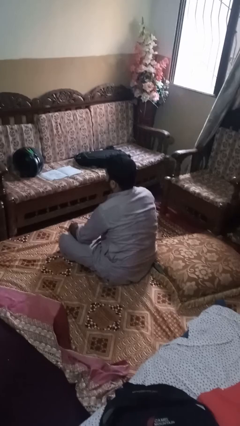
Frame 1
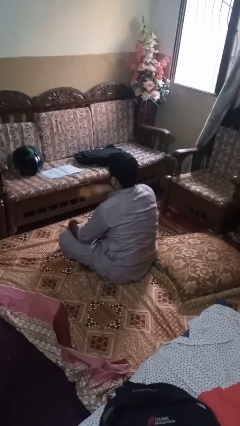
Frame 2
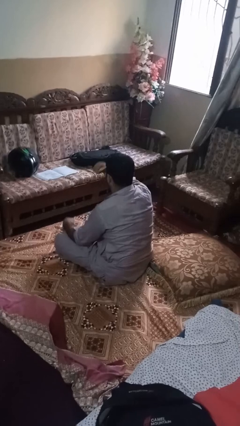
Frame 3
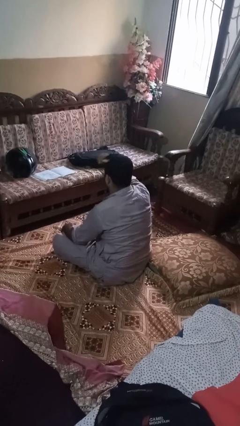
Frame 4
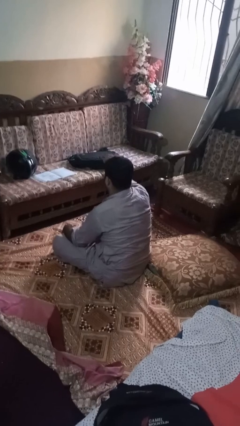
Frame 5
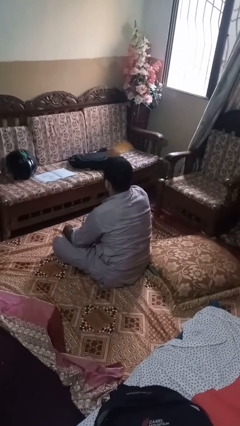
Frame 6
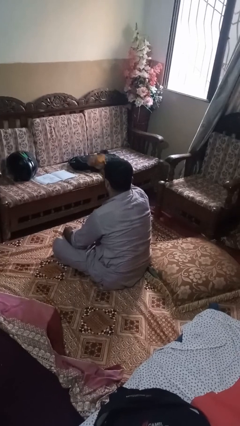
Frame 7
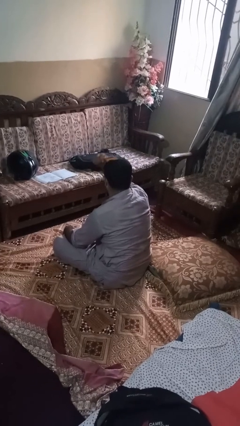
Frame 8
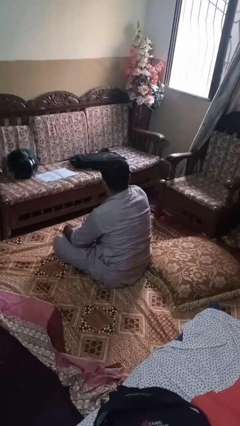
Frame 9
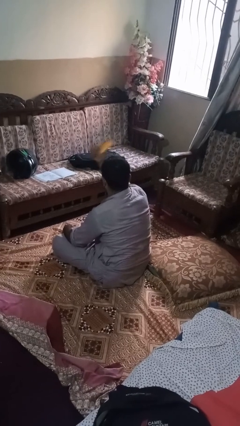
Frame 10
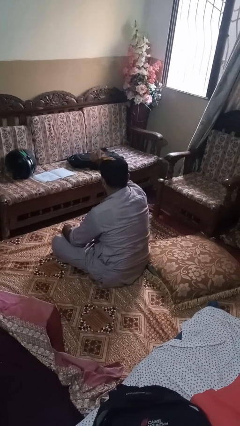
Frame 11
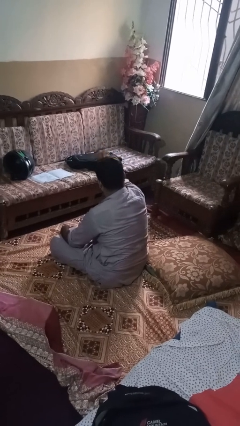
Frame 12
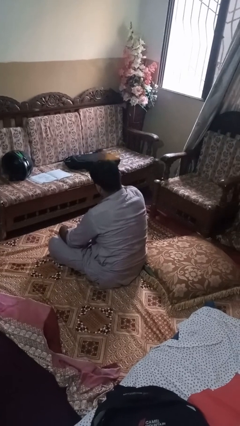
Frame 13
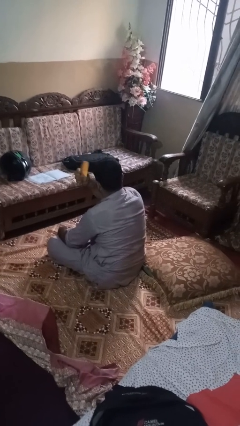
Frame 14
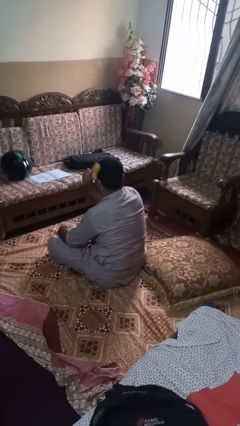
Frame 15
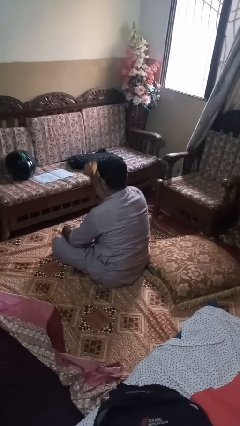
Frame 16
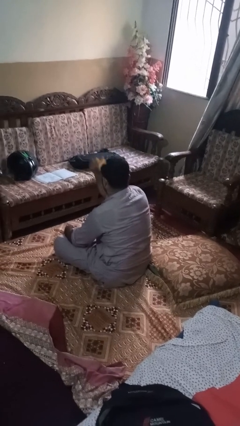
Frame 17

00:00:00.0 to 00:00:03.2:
person brushes hair

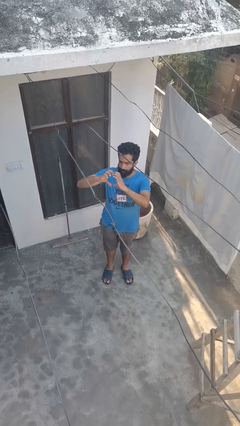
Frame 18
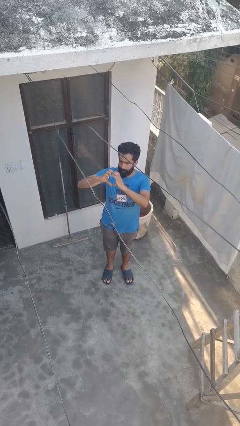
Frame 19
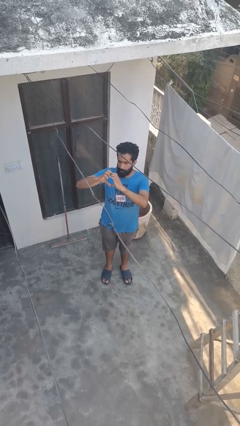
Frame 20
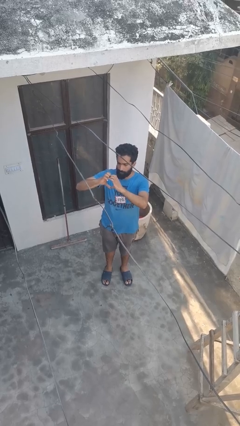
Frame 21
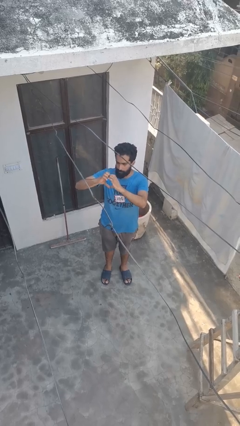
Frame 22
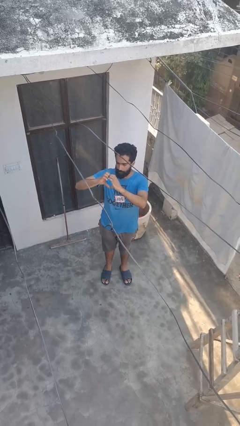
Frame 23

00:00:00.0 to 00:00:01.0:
person gestures heart

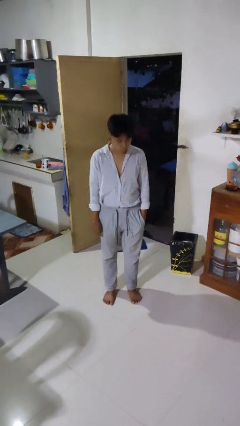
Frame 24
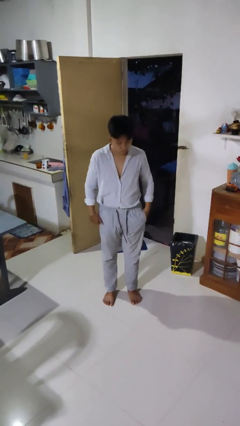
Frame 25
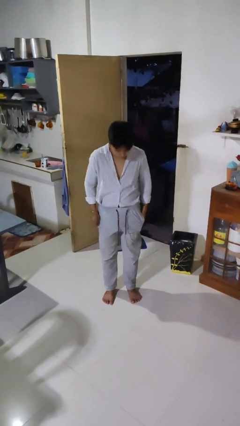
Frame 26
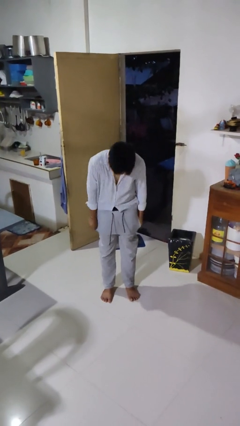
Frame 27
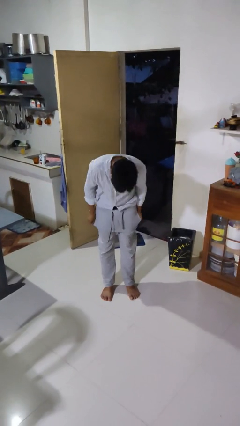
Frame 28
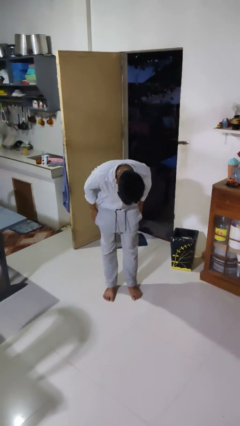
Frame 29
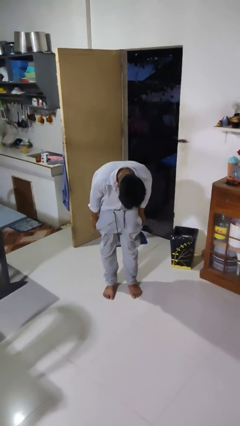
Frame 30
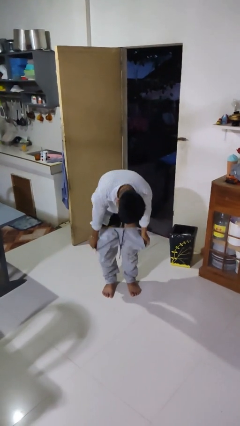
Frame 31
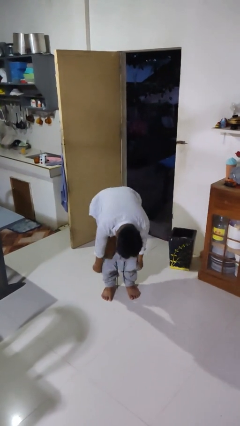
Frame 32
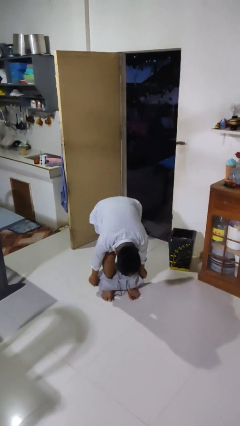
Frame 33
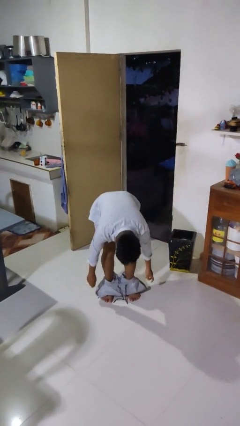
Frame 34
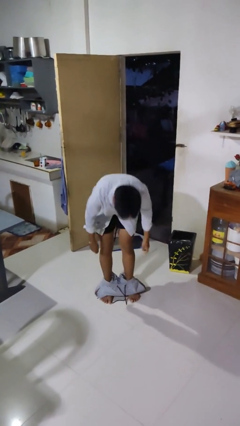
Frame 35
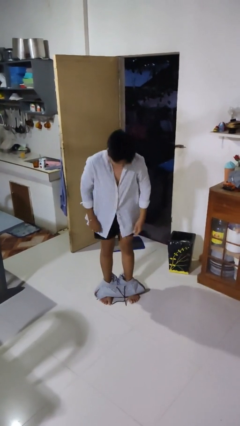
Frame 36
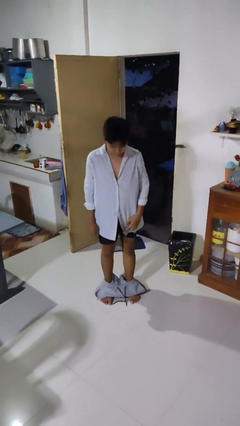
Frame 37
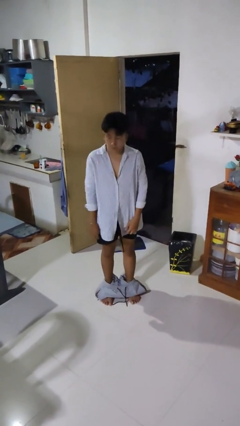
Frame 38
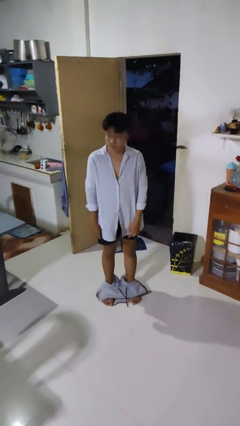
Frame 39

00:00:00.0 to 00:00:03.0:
person takes off pants

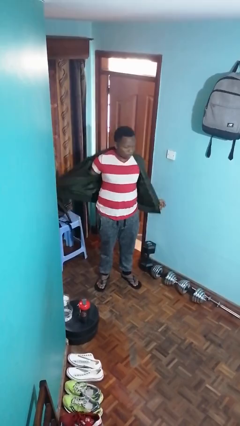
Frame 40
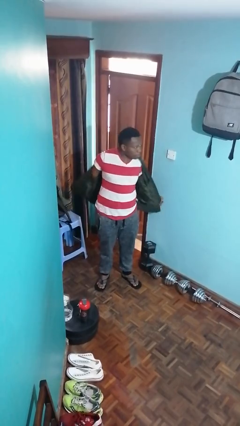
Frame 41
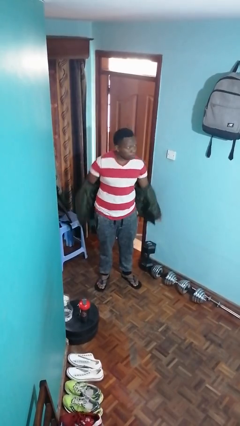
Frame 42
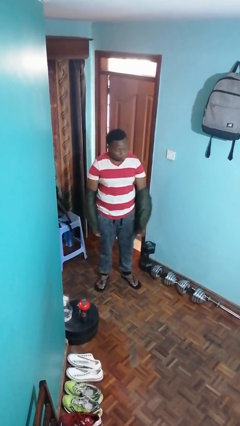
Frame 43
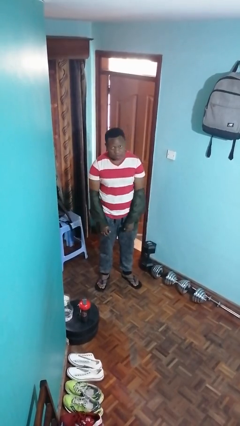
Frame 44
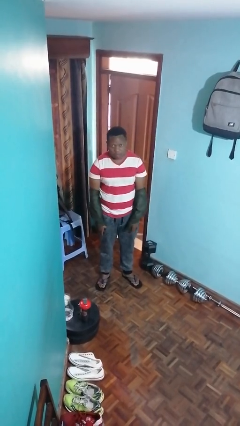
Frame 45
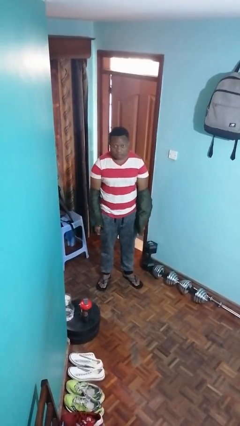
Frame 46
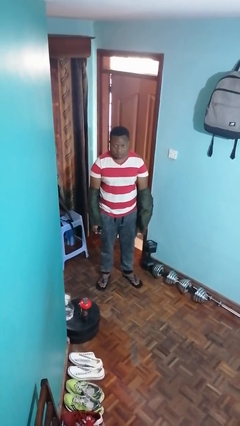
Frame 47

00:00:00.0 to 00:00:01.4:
person takes off jacket

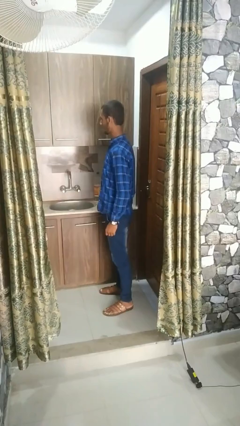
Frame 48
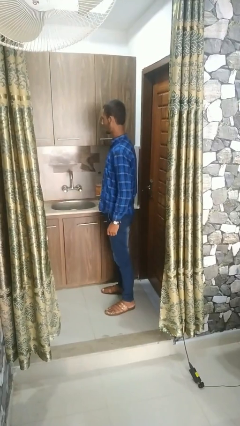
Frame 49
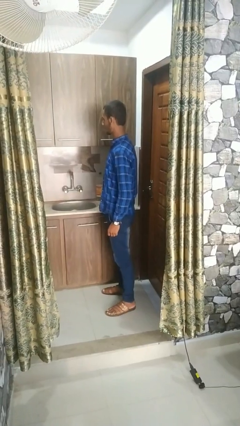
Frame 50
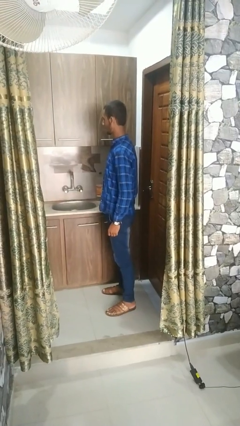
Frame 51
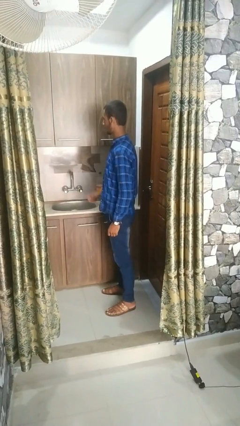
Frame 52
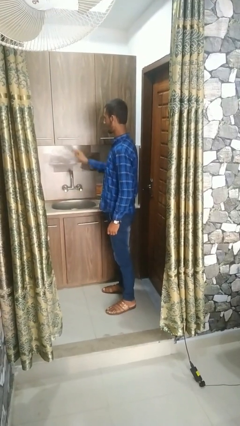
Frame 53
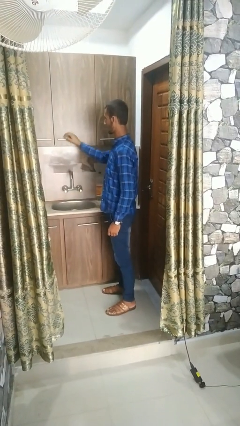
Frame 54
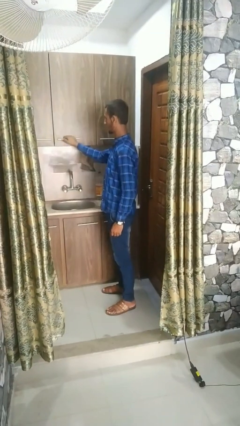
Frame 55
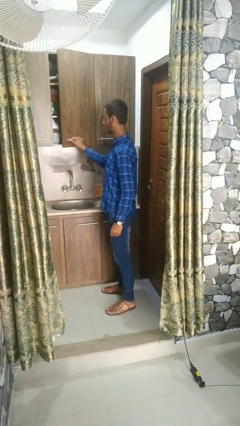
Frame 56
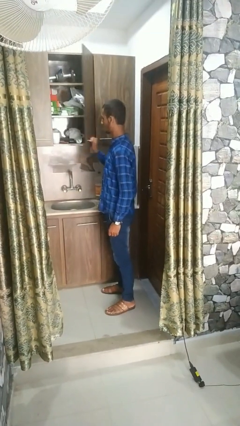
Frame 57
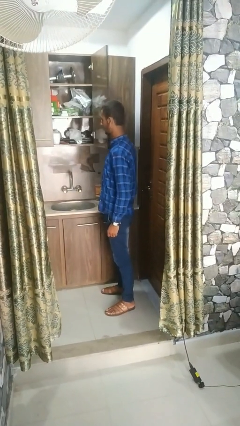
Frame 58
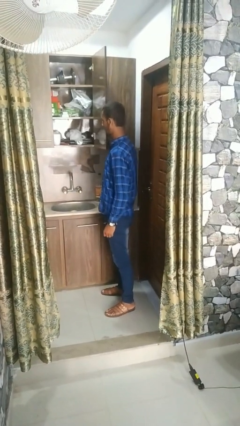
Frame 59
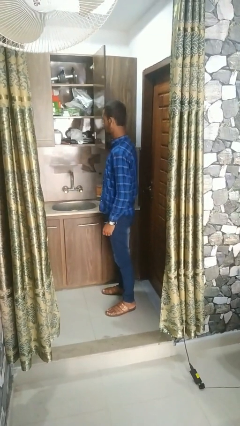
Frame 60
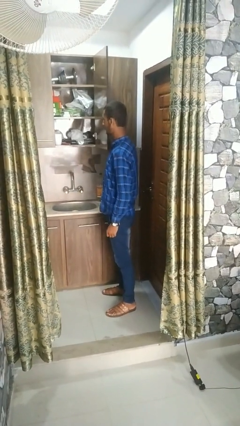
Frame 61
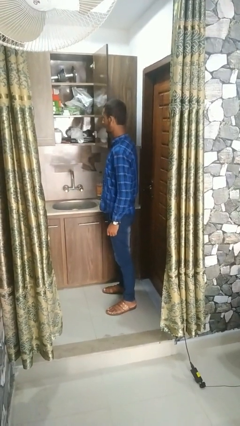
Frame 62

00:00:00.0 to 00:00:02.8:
person opens cabinet

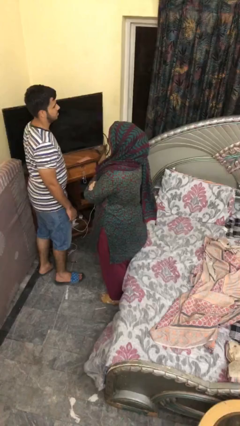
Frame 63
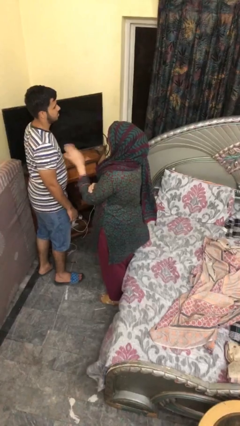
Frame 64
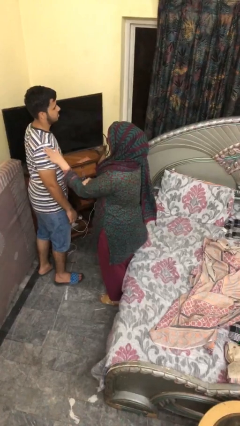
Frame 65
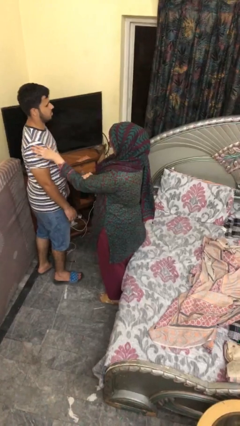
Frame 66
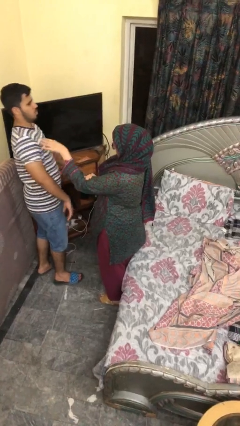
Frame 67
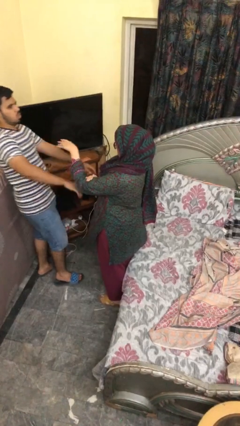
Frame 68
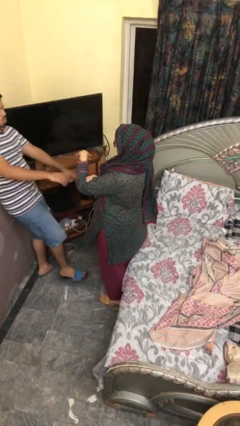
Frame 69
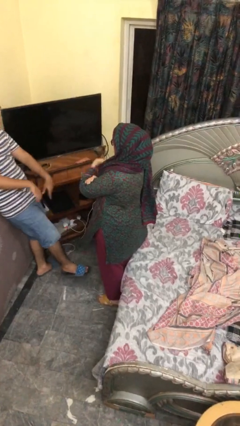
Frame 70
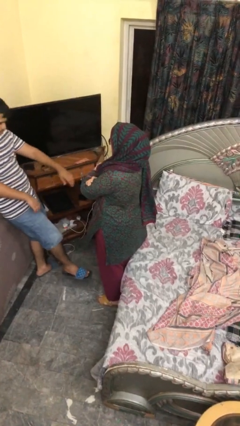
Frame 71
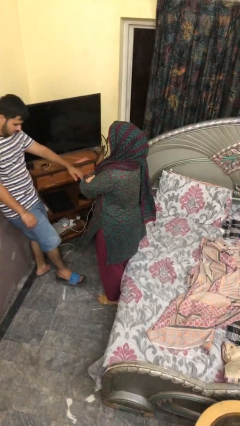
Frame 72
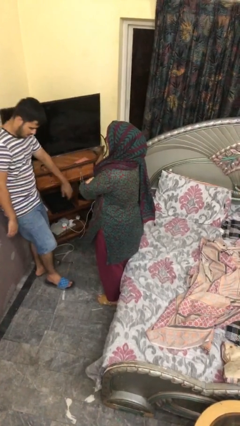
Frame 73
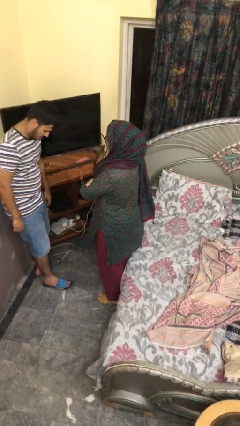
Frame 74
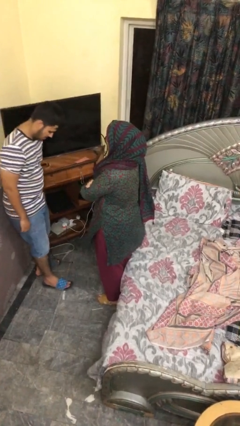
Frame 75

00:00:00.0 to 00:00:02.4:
person shoves person

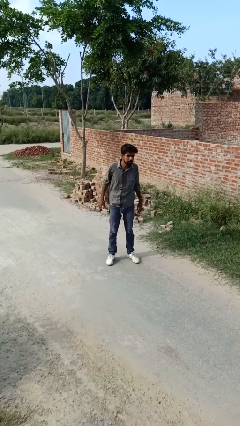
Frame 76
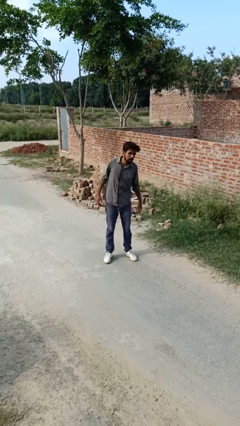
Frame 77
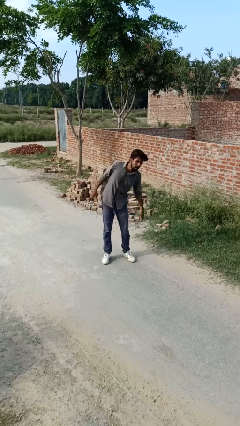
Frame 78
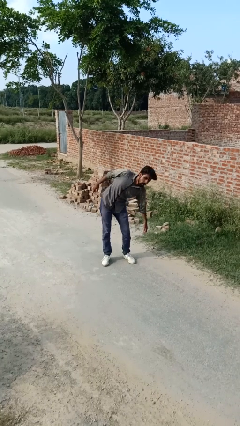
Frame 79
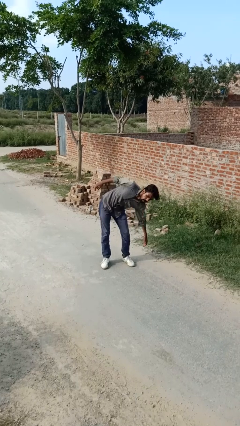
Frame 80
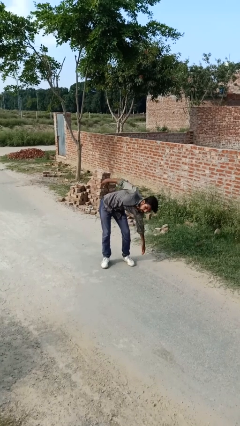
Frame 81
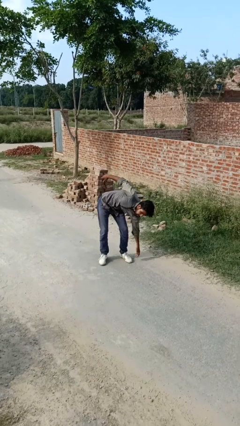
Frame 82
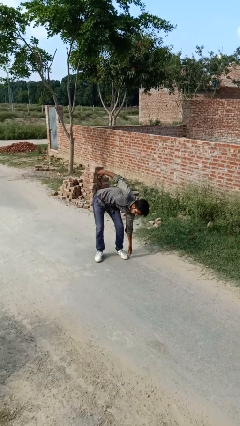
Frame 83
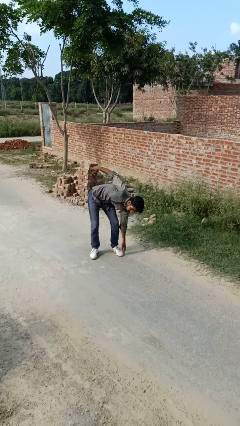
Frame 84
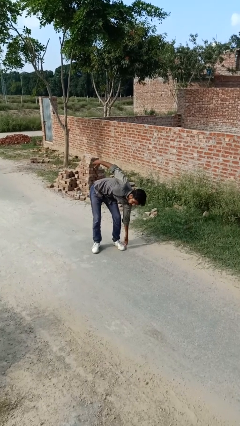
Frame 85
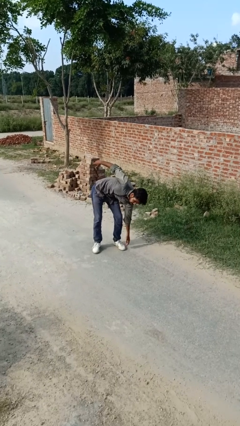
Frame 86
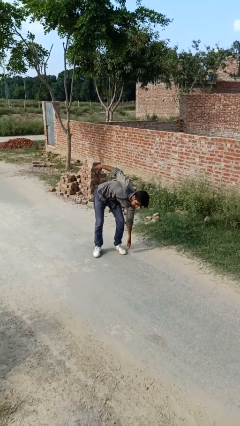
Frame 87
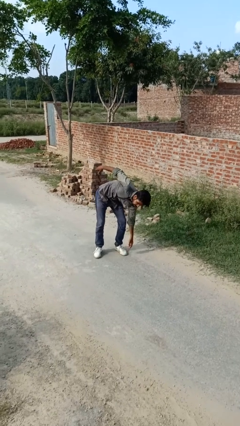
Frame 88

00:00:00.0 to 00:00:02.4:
person stretches arms to side

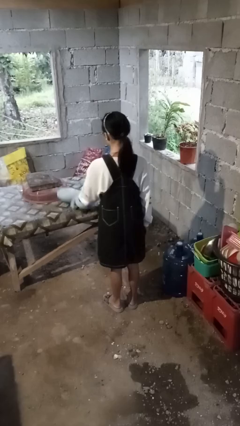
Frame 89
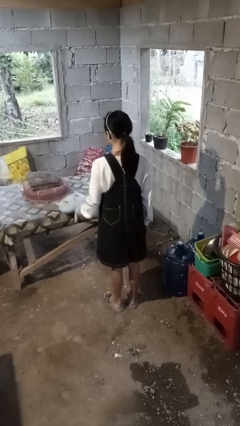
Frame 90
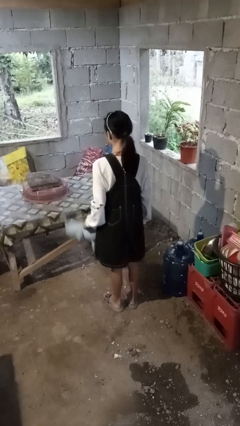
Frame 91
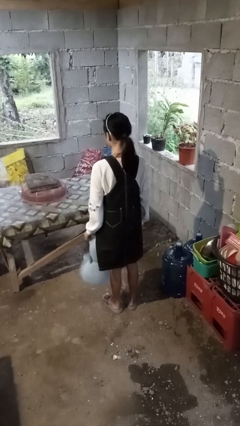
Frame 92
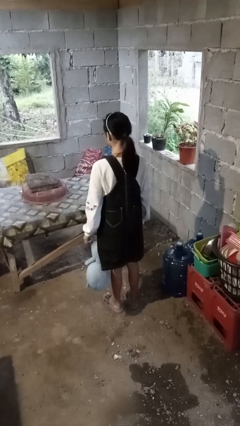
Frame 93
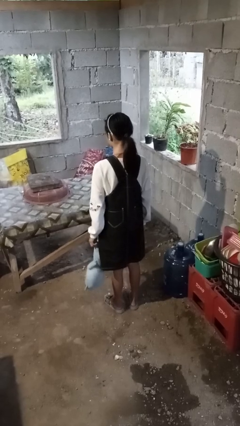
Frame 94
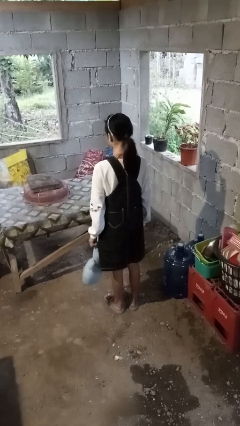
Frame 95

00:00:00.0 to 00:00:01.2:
person picks up object from table
